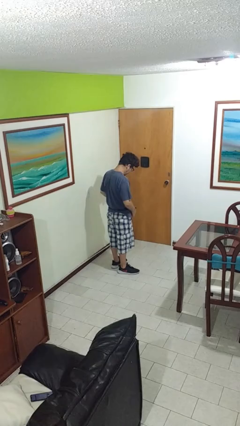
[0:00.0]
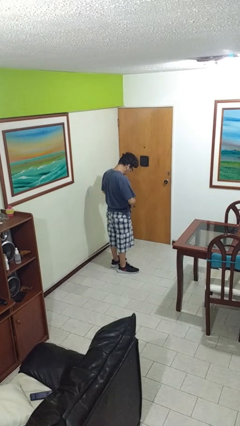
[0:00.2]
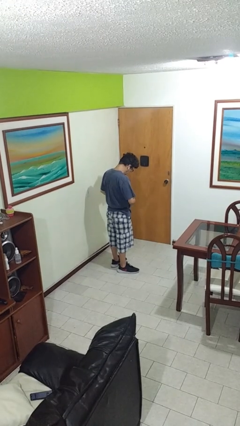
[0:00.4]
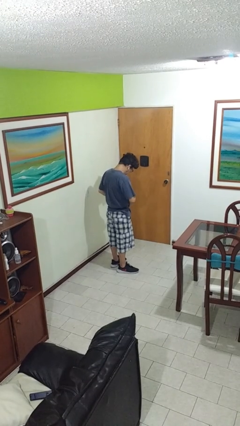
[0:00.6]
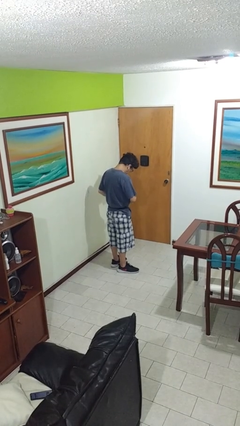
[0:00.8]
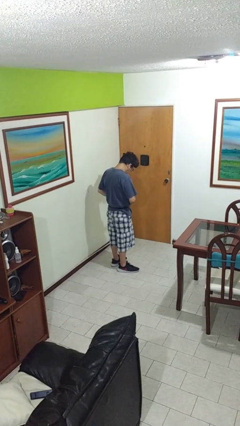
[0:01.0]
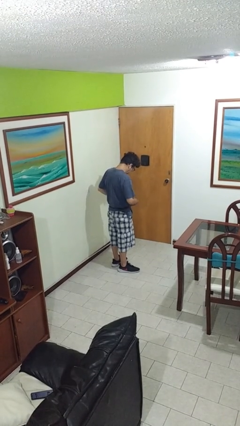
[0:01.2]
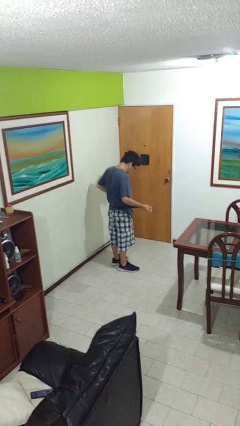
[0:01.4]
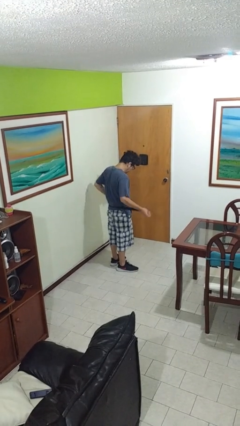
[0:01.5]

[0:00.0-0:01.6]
person takes off belt

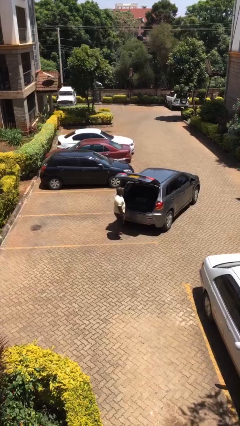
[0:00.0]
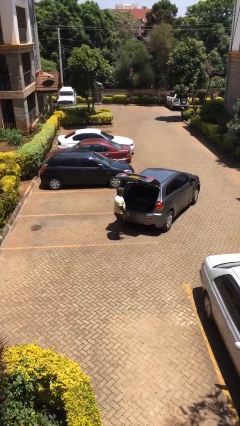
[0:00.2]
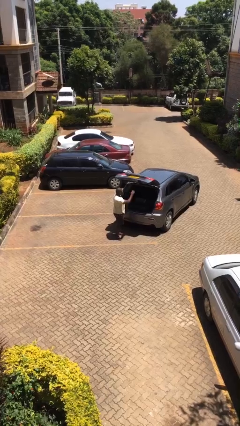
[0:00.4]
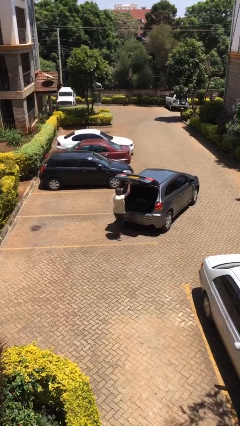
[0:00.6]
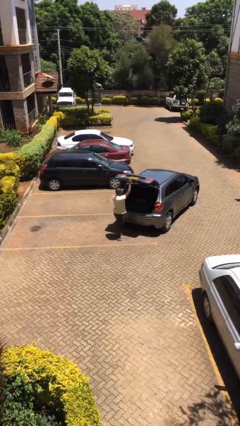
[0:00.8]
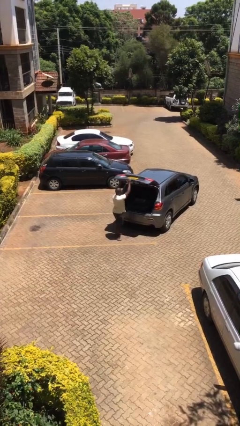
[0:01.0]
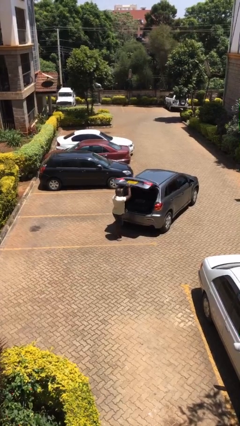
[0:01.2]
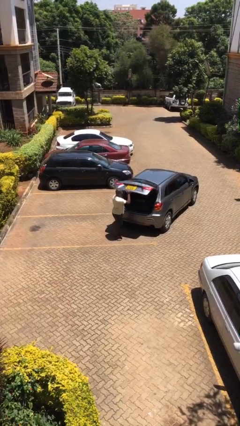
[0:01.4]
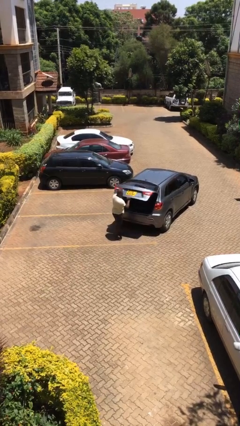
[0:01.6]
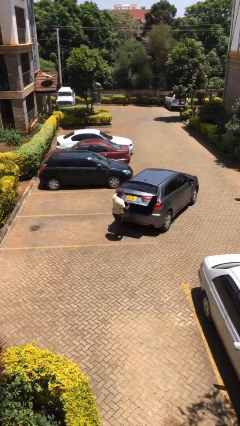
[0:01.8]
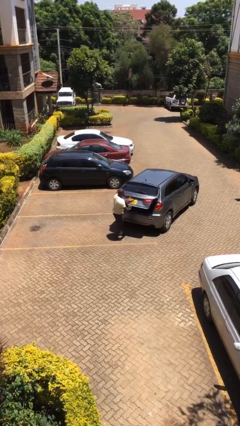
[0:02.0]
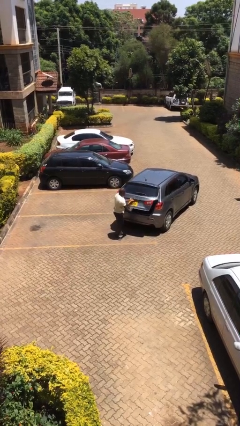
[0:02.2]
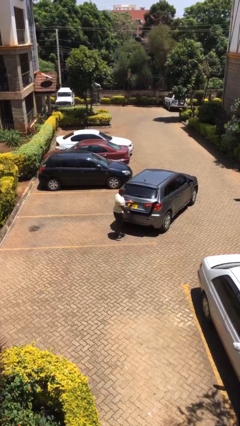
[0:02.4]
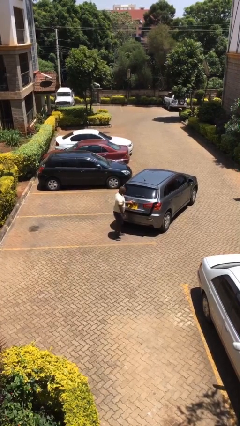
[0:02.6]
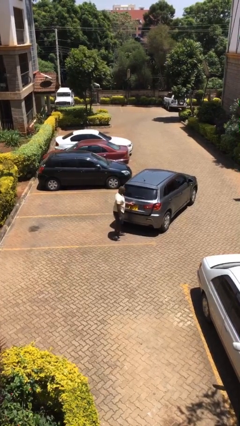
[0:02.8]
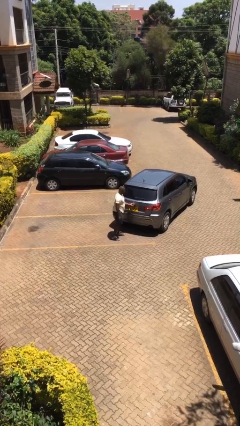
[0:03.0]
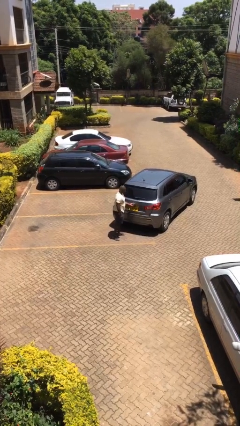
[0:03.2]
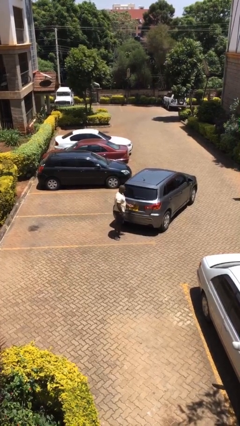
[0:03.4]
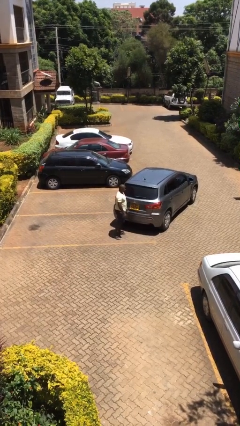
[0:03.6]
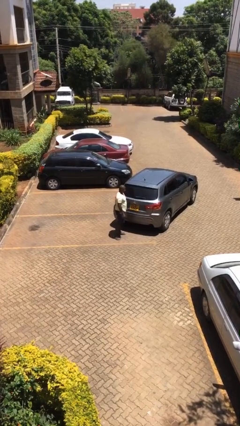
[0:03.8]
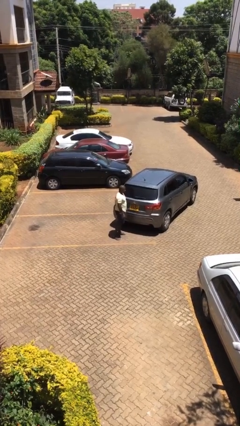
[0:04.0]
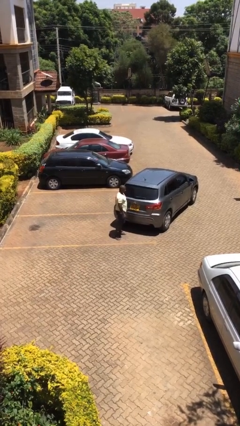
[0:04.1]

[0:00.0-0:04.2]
person closes car trunk

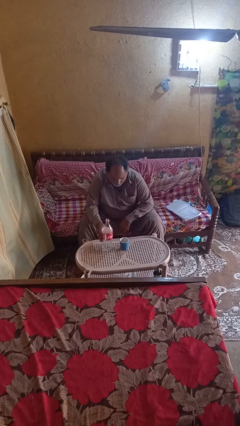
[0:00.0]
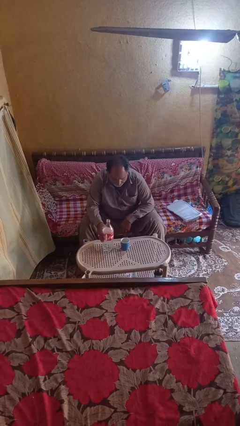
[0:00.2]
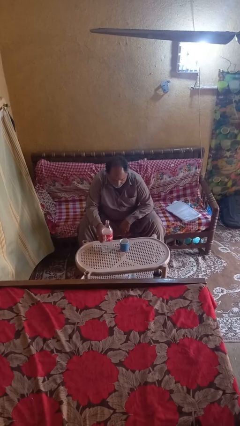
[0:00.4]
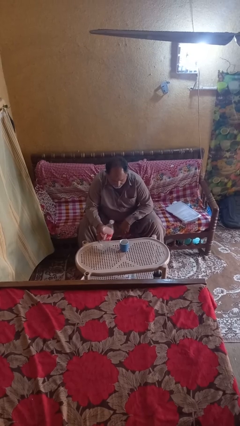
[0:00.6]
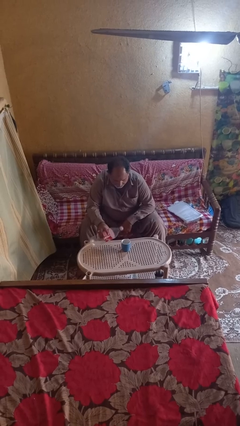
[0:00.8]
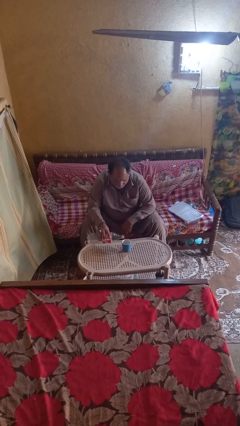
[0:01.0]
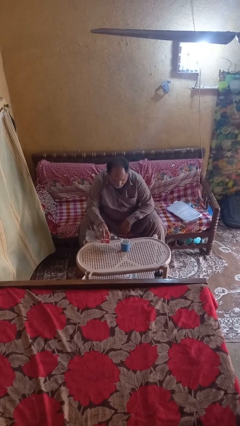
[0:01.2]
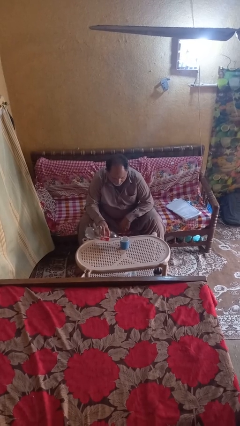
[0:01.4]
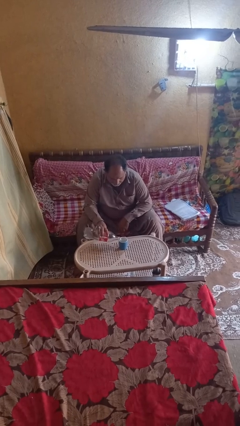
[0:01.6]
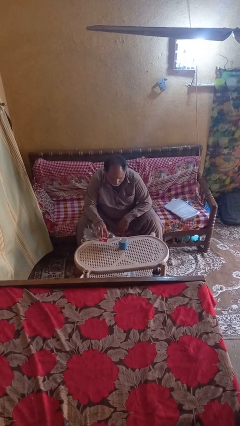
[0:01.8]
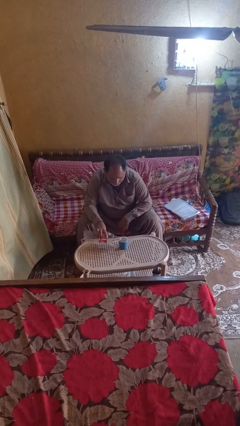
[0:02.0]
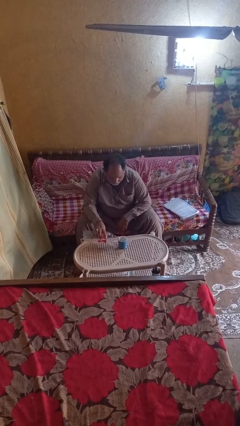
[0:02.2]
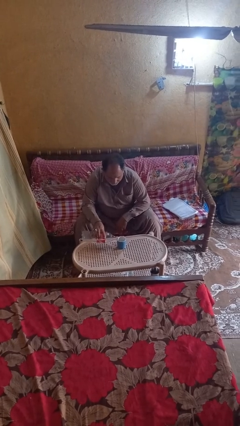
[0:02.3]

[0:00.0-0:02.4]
person pours liquid into cup

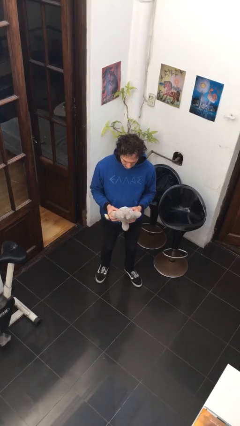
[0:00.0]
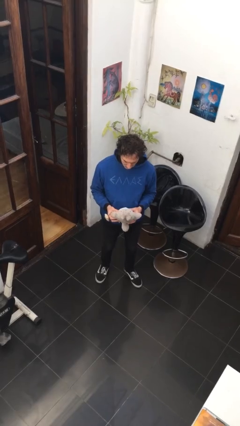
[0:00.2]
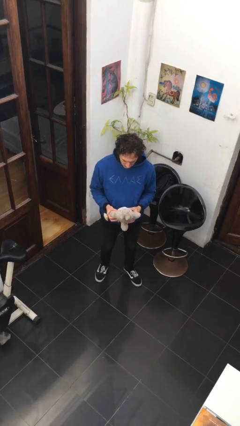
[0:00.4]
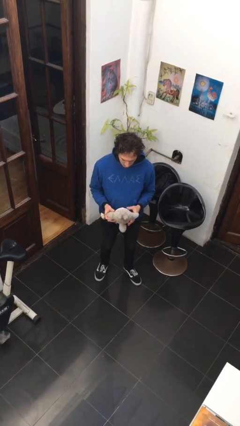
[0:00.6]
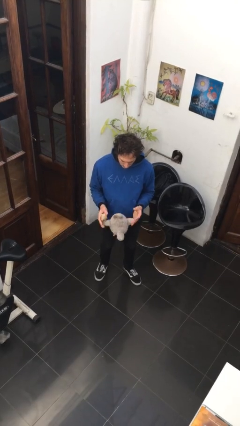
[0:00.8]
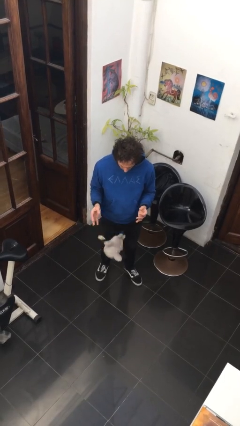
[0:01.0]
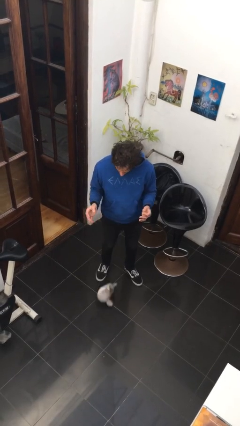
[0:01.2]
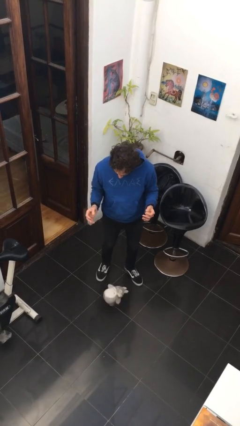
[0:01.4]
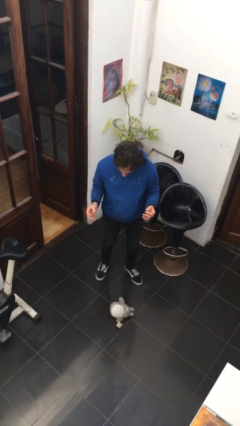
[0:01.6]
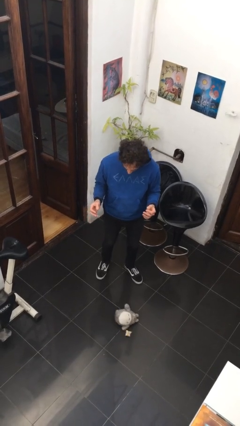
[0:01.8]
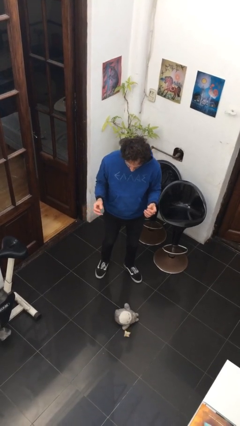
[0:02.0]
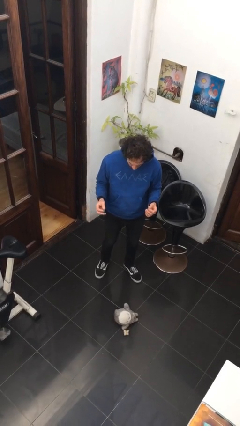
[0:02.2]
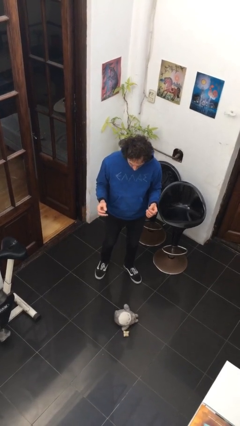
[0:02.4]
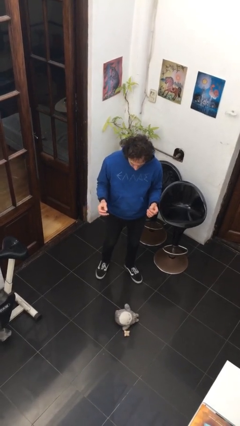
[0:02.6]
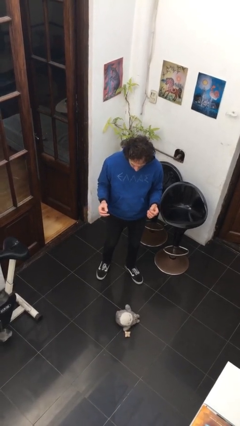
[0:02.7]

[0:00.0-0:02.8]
person drops object

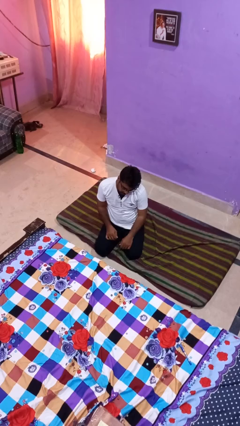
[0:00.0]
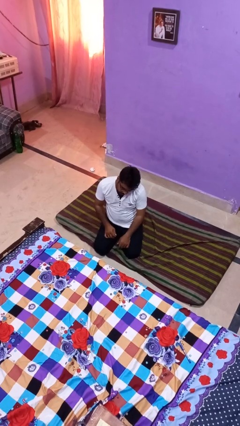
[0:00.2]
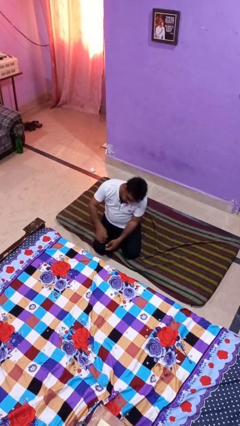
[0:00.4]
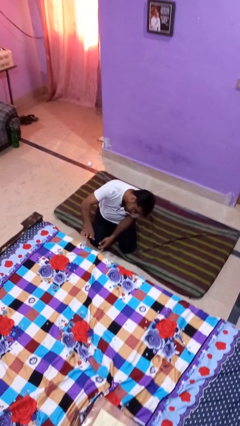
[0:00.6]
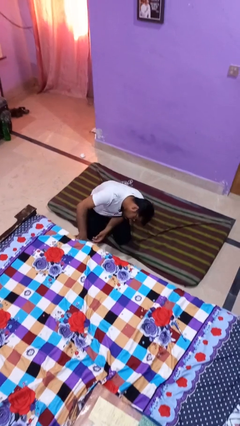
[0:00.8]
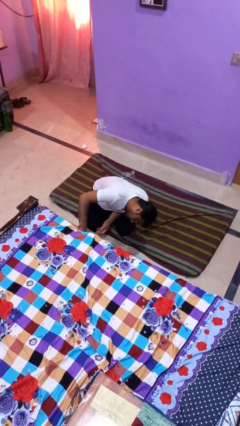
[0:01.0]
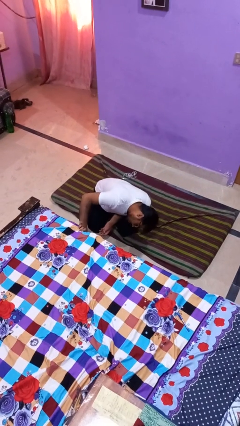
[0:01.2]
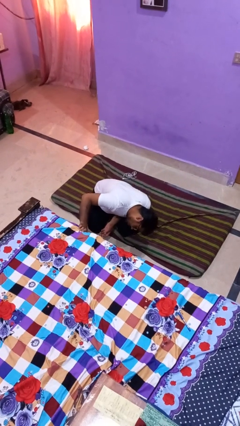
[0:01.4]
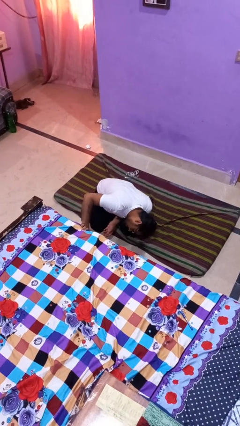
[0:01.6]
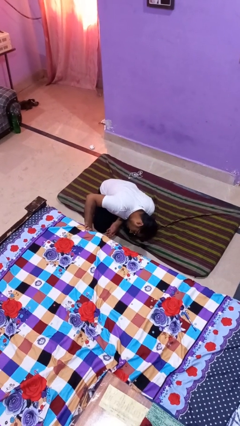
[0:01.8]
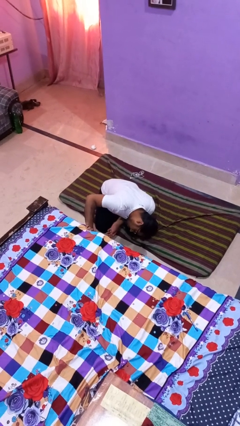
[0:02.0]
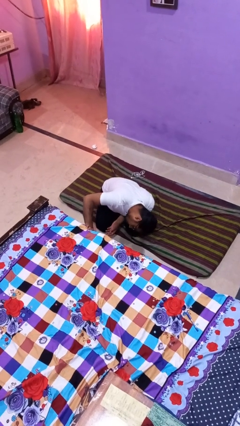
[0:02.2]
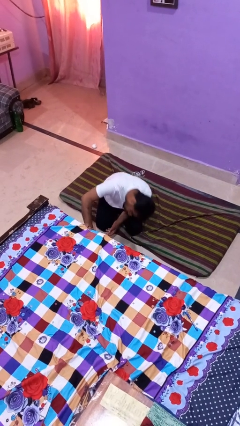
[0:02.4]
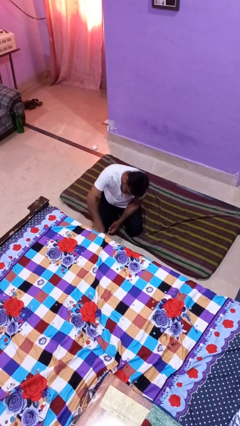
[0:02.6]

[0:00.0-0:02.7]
person searches under bed

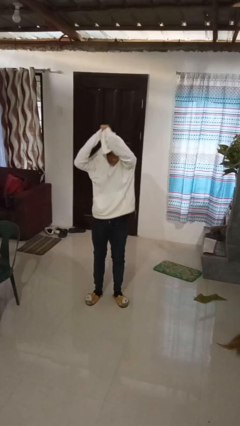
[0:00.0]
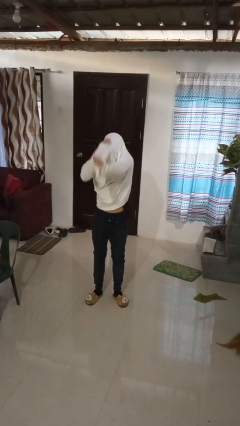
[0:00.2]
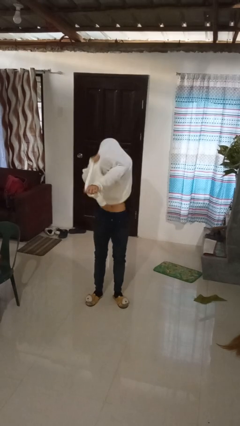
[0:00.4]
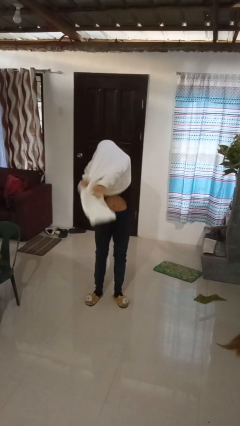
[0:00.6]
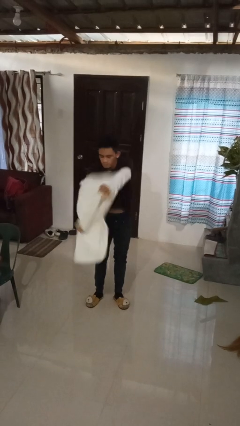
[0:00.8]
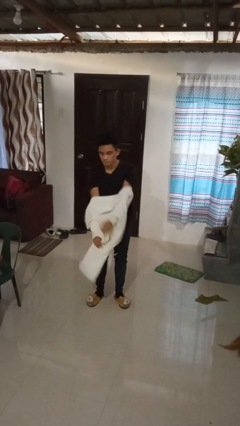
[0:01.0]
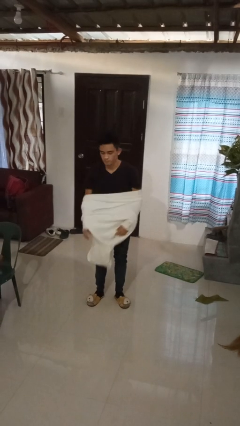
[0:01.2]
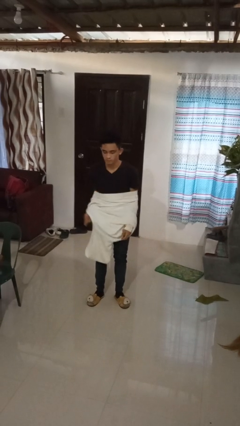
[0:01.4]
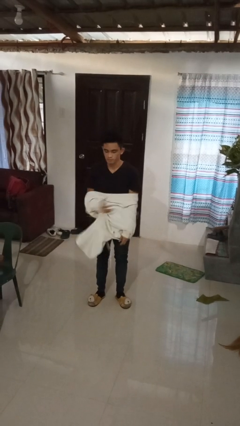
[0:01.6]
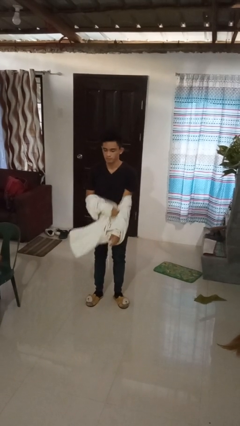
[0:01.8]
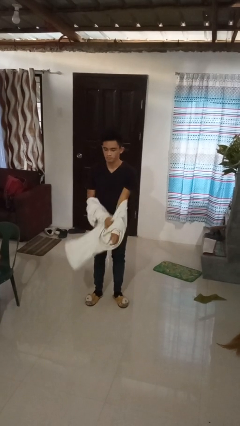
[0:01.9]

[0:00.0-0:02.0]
person takes off hoodie

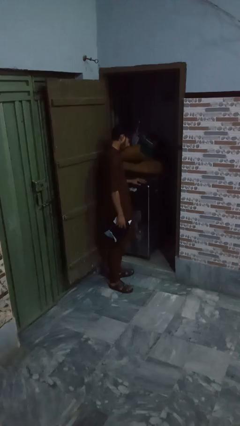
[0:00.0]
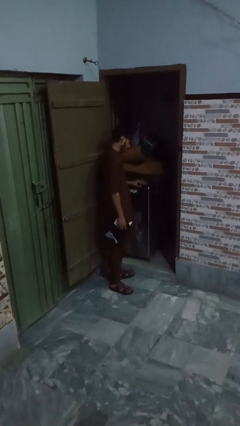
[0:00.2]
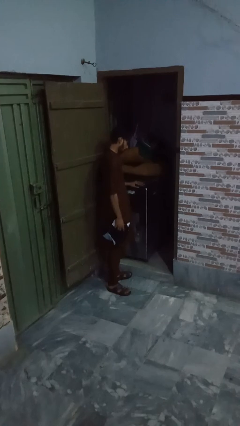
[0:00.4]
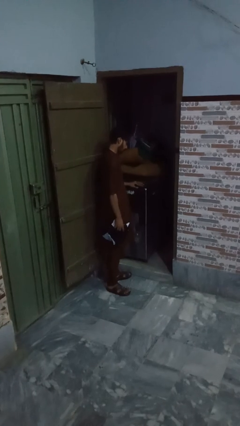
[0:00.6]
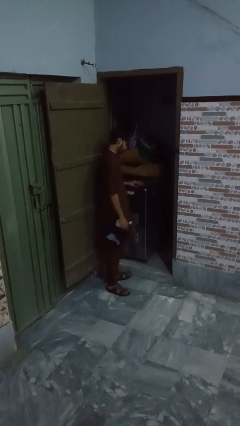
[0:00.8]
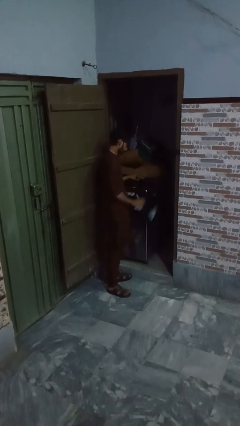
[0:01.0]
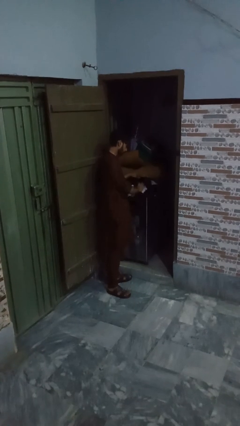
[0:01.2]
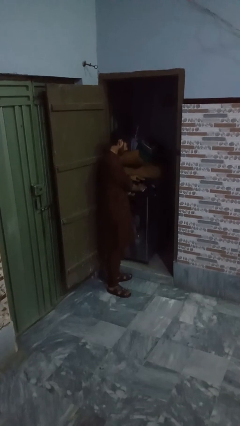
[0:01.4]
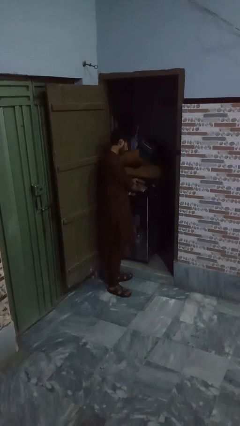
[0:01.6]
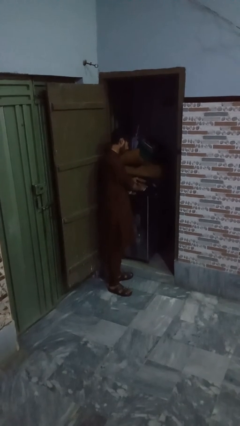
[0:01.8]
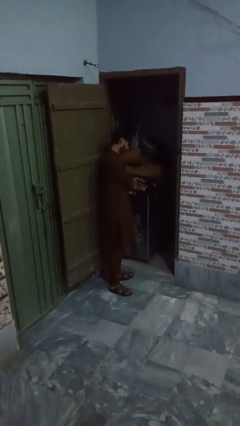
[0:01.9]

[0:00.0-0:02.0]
person loads dryer
